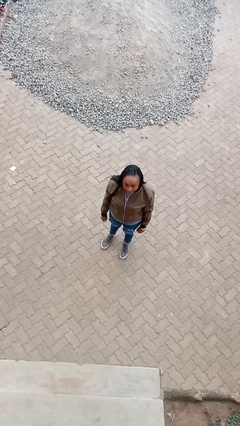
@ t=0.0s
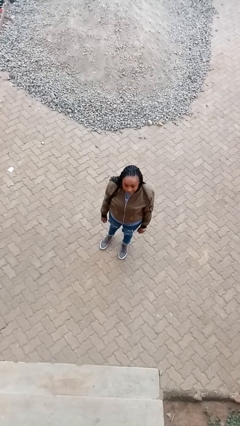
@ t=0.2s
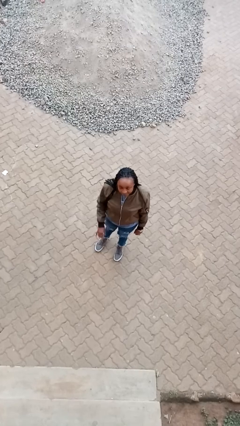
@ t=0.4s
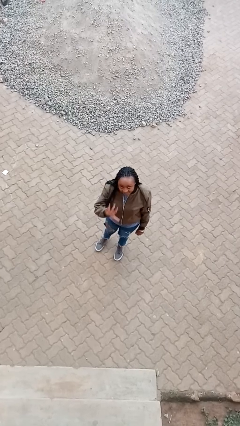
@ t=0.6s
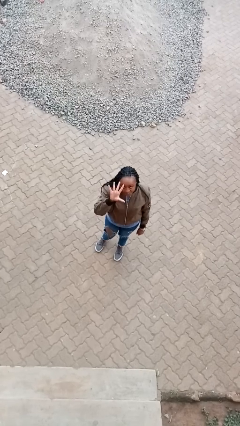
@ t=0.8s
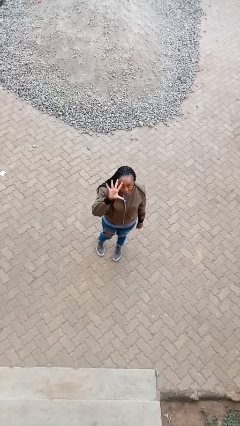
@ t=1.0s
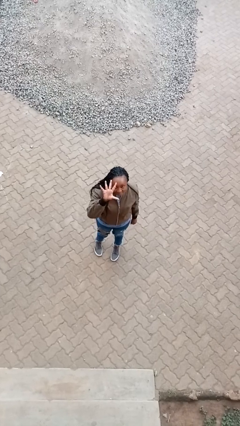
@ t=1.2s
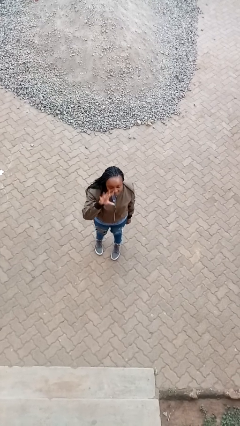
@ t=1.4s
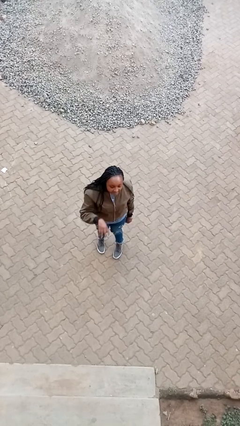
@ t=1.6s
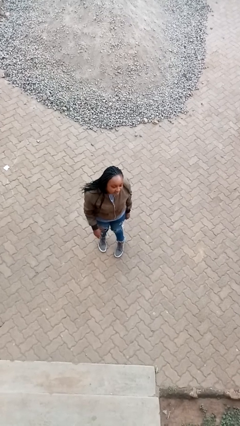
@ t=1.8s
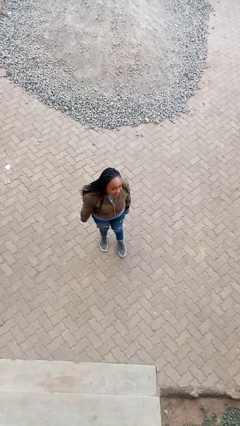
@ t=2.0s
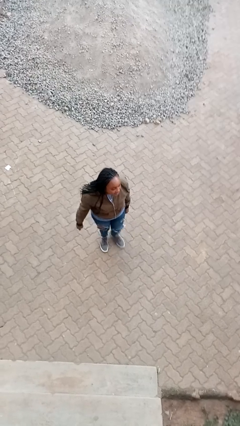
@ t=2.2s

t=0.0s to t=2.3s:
person gestures number five

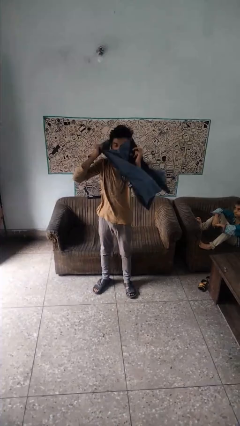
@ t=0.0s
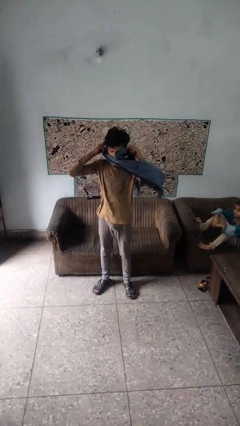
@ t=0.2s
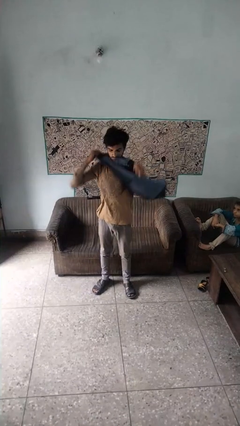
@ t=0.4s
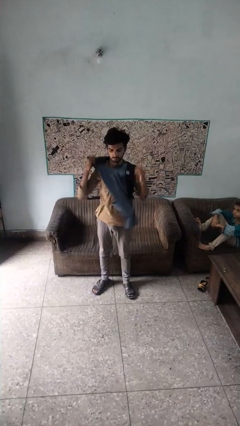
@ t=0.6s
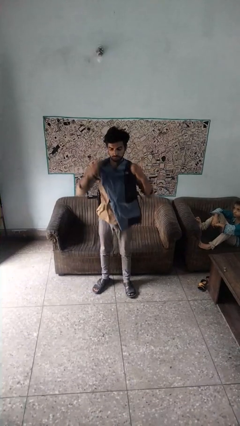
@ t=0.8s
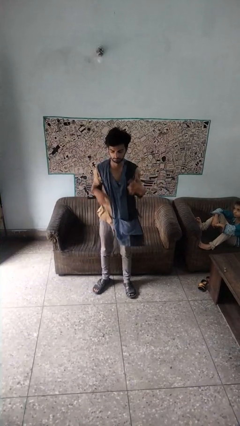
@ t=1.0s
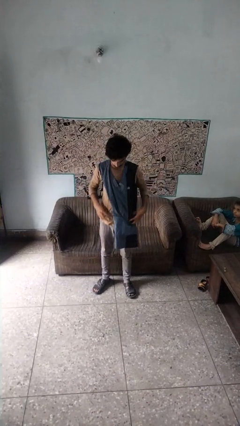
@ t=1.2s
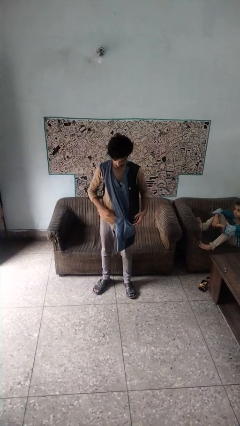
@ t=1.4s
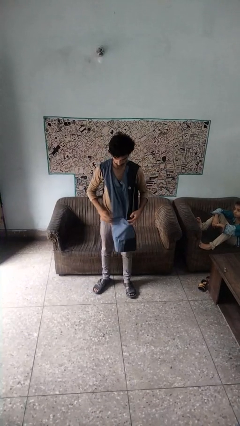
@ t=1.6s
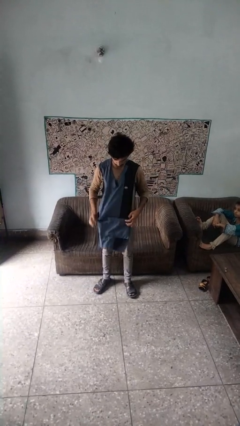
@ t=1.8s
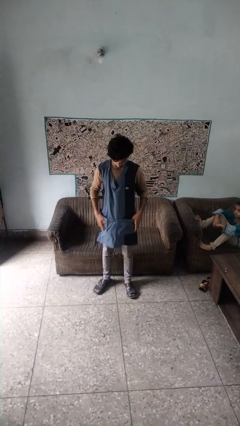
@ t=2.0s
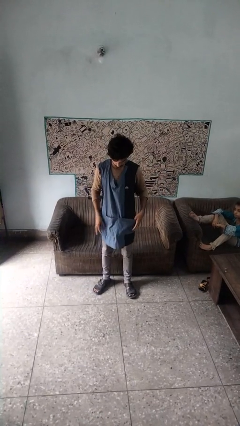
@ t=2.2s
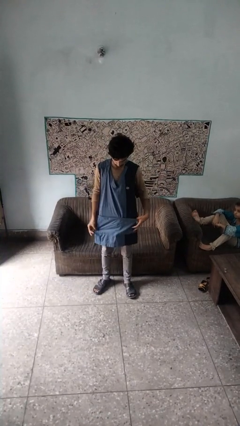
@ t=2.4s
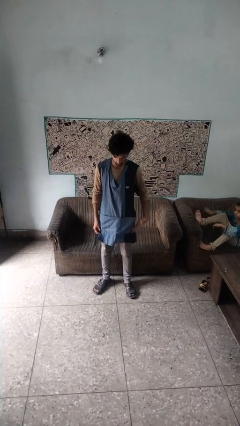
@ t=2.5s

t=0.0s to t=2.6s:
person puts on apron

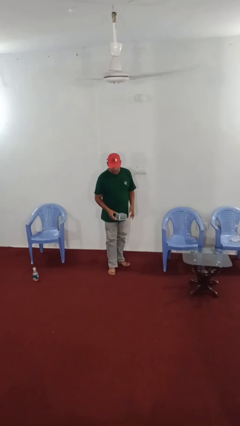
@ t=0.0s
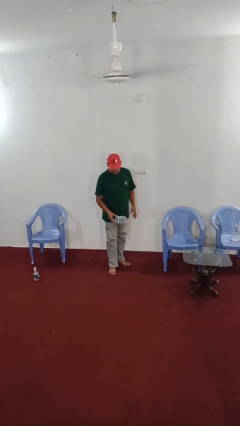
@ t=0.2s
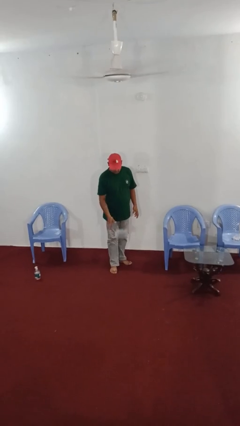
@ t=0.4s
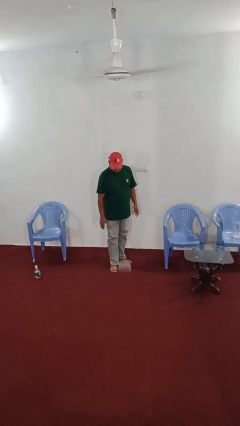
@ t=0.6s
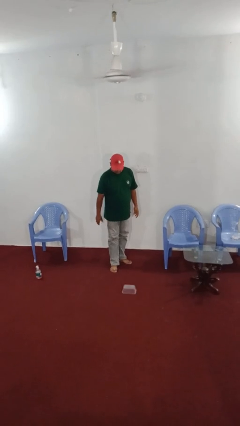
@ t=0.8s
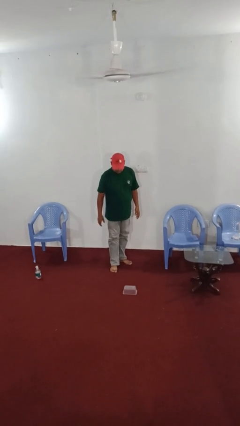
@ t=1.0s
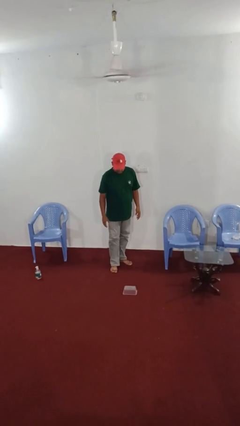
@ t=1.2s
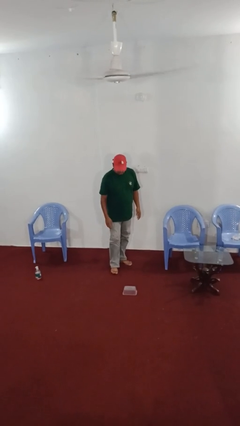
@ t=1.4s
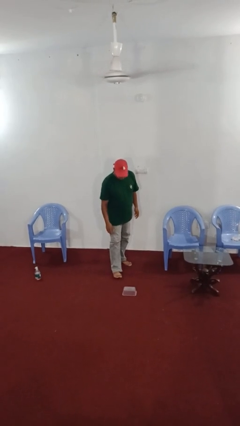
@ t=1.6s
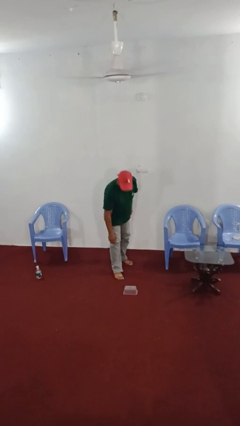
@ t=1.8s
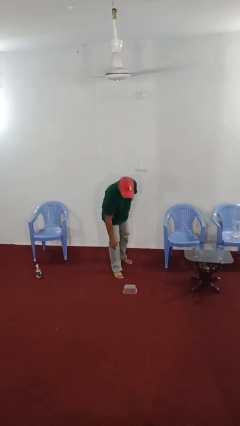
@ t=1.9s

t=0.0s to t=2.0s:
person throws object to ground

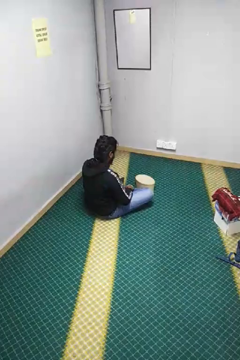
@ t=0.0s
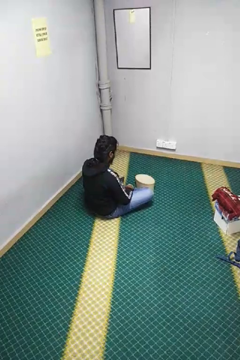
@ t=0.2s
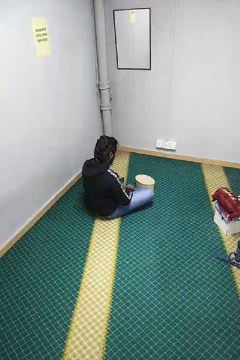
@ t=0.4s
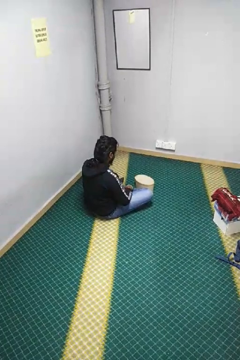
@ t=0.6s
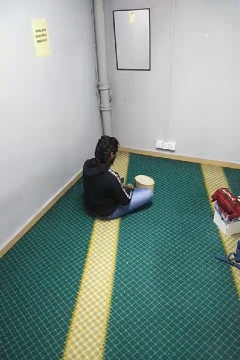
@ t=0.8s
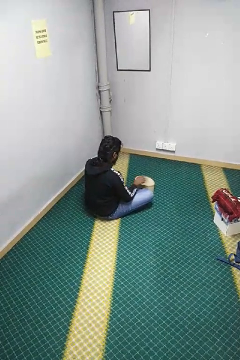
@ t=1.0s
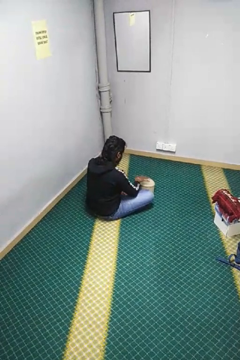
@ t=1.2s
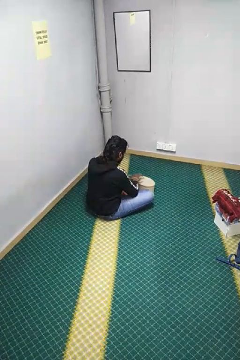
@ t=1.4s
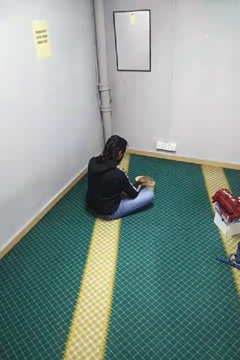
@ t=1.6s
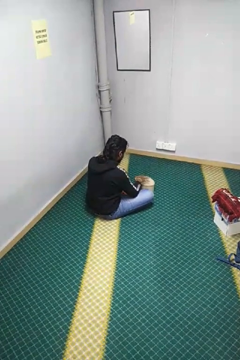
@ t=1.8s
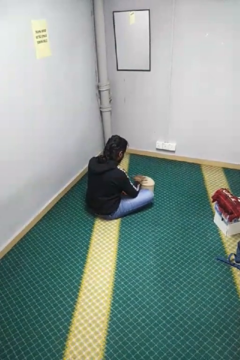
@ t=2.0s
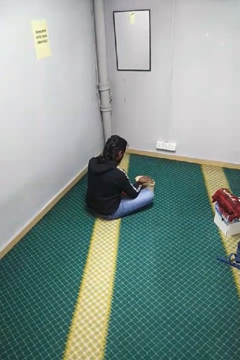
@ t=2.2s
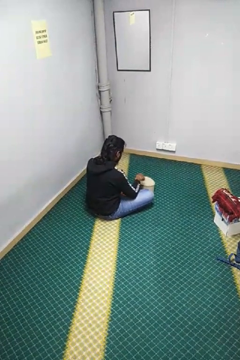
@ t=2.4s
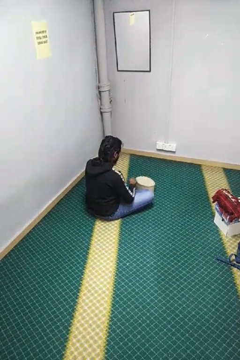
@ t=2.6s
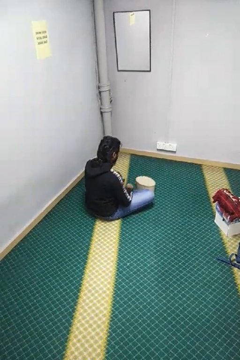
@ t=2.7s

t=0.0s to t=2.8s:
person waves hand over object

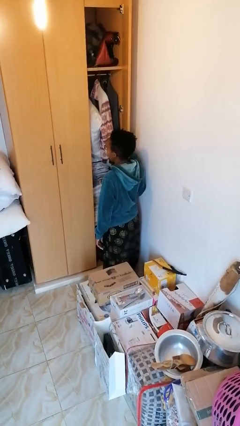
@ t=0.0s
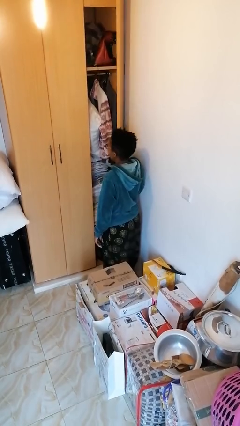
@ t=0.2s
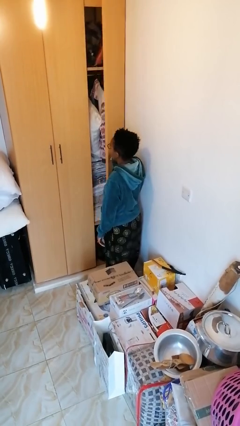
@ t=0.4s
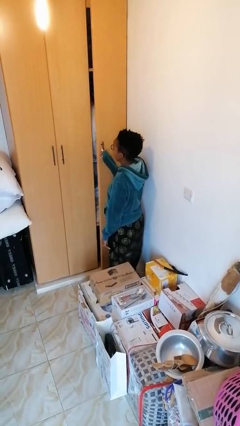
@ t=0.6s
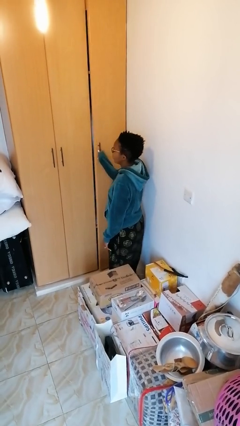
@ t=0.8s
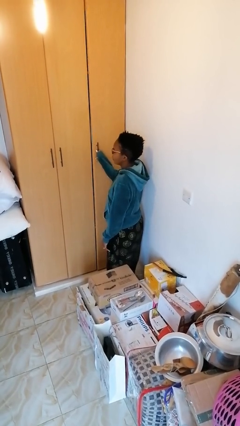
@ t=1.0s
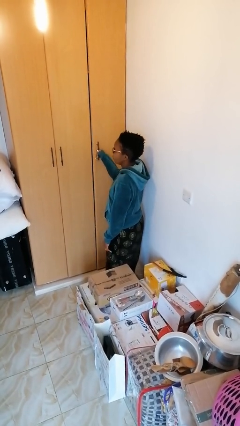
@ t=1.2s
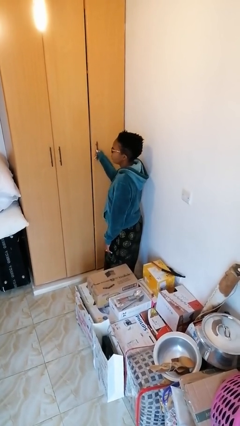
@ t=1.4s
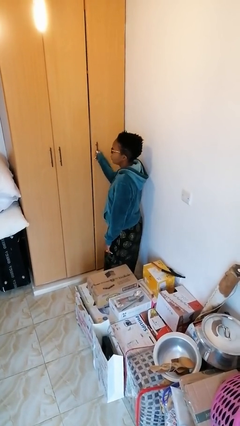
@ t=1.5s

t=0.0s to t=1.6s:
person closes closet door

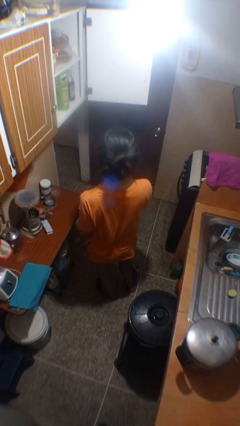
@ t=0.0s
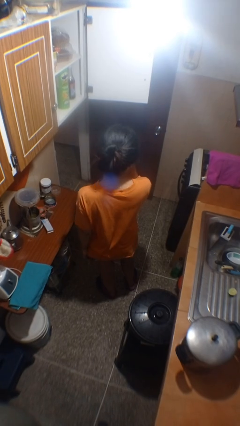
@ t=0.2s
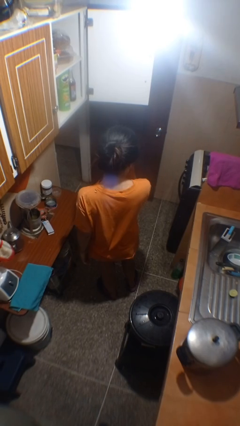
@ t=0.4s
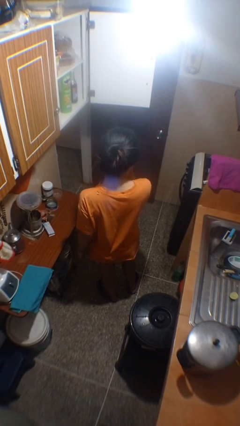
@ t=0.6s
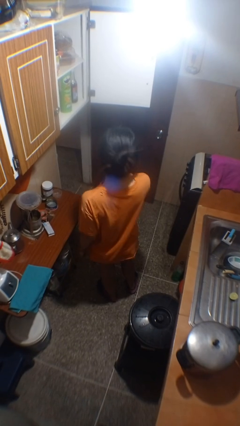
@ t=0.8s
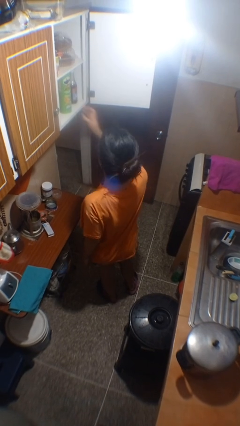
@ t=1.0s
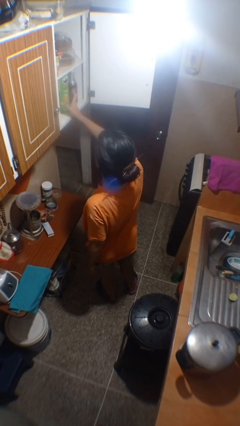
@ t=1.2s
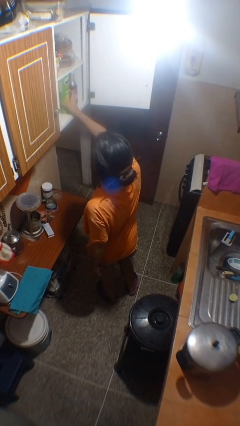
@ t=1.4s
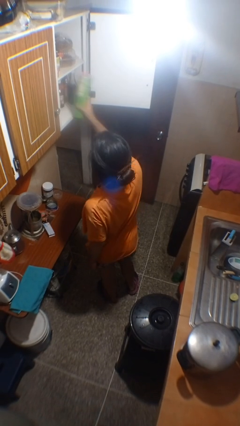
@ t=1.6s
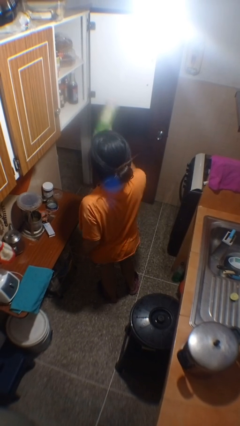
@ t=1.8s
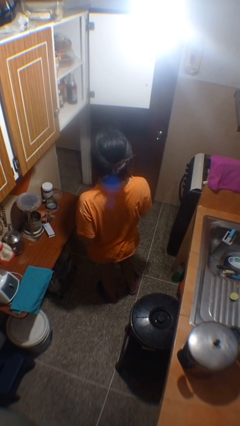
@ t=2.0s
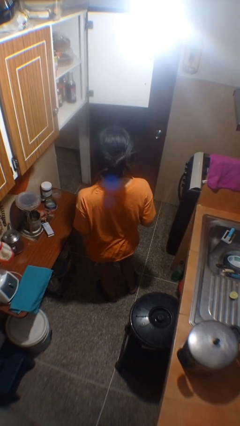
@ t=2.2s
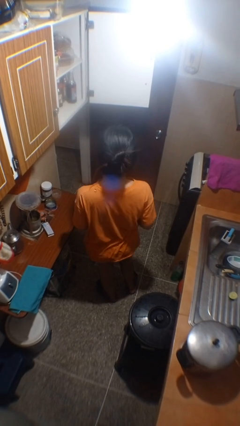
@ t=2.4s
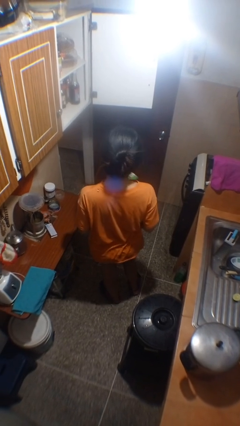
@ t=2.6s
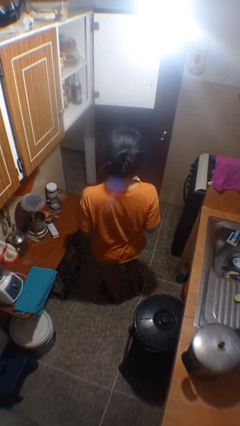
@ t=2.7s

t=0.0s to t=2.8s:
person takes object from cabinet

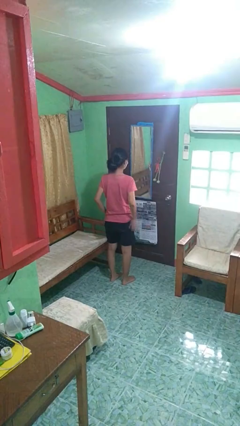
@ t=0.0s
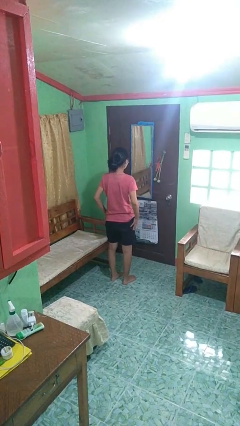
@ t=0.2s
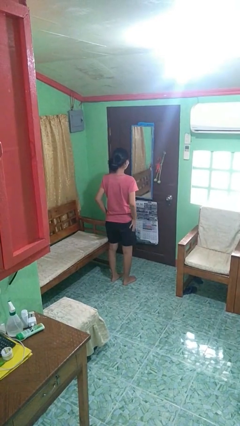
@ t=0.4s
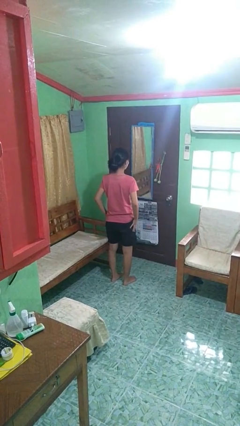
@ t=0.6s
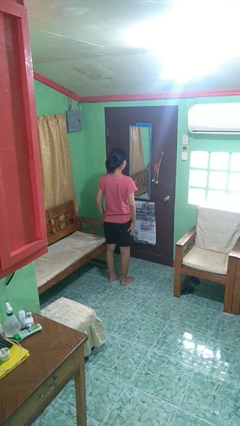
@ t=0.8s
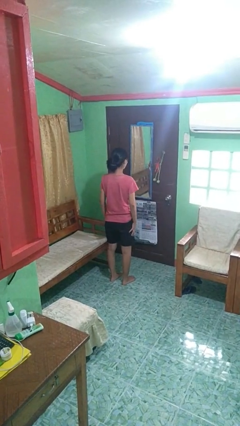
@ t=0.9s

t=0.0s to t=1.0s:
person slaps hands on thighs

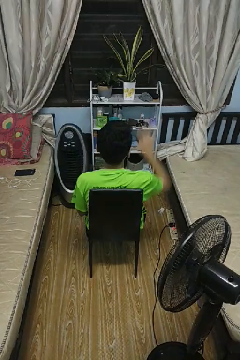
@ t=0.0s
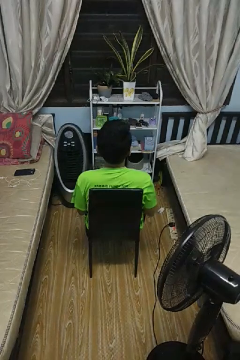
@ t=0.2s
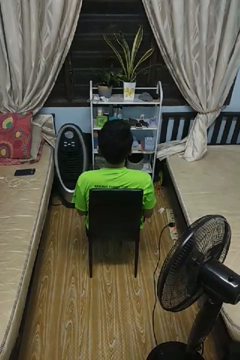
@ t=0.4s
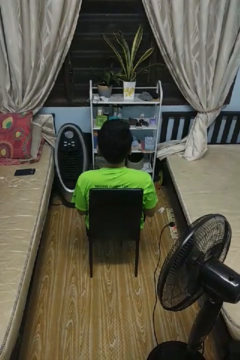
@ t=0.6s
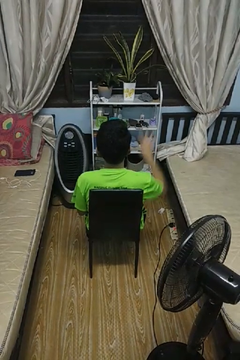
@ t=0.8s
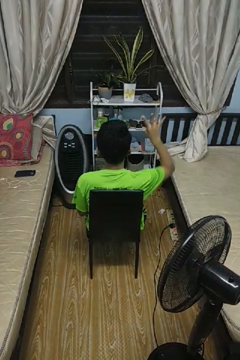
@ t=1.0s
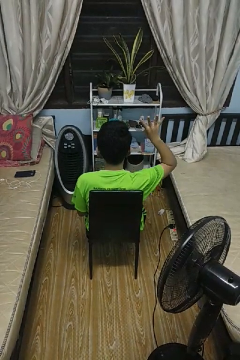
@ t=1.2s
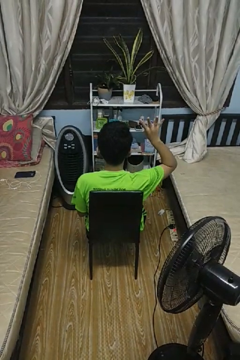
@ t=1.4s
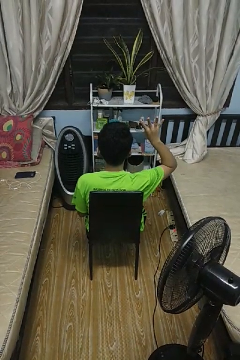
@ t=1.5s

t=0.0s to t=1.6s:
person gestures number four

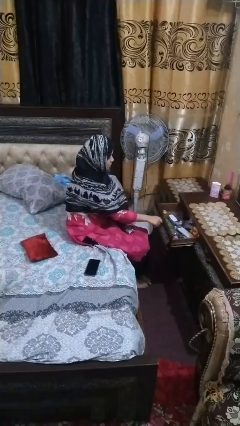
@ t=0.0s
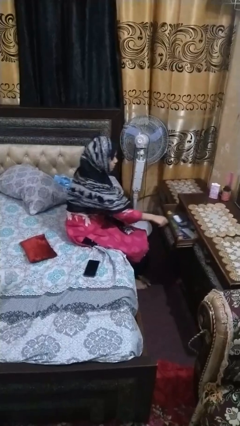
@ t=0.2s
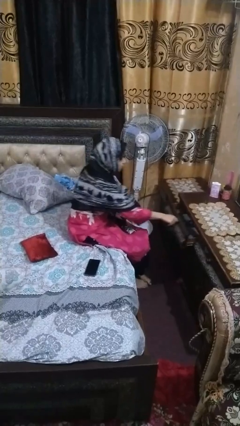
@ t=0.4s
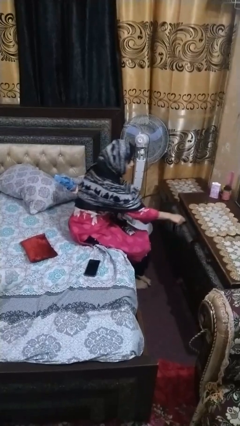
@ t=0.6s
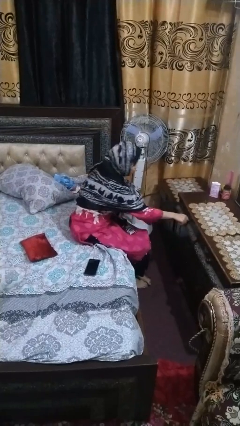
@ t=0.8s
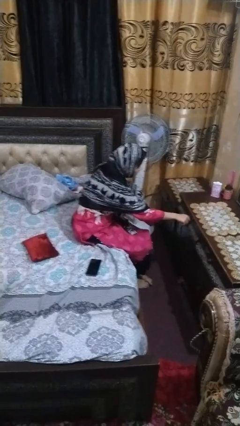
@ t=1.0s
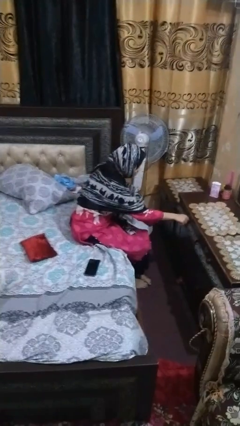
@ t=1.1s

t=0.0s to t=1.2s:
person closes dresser drawer
